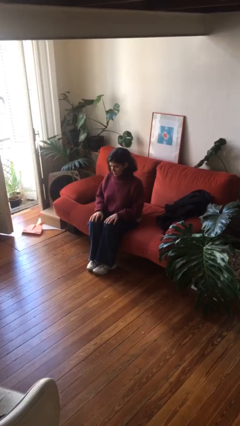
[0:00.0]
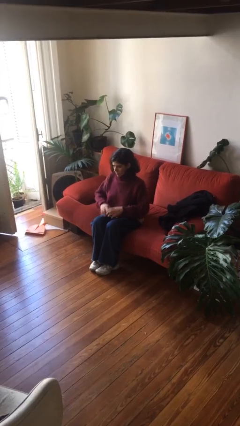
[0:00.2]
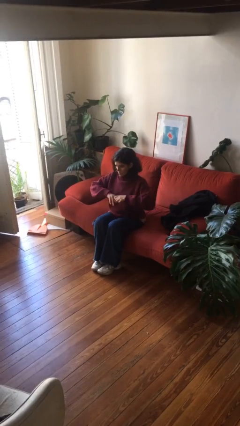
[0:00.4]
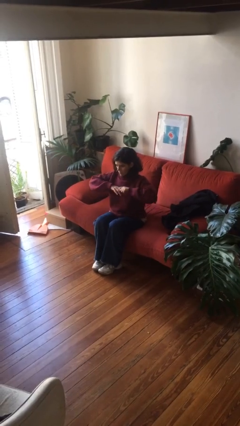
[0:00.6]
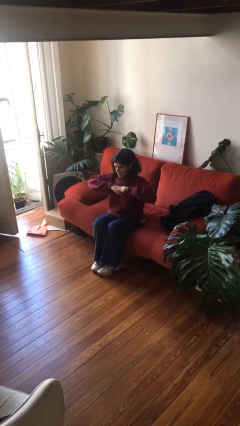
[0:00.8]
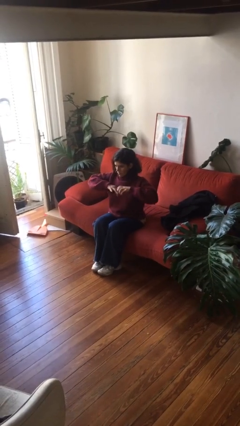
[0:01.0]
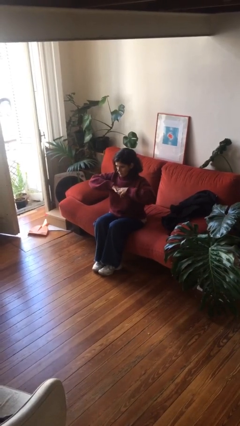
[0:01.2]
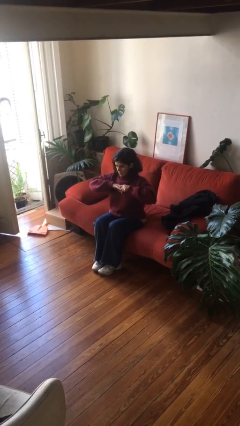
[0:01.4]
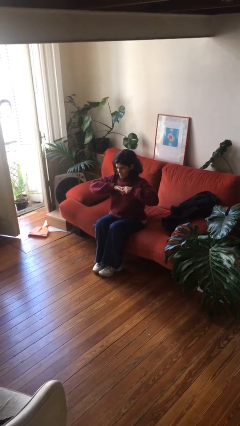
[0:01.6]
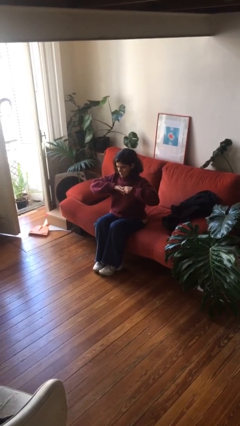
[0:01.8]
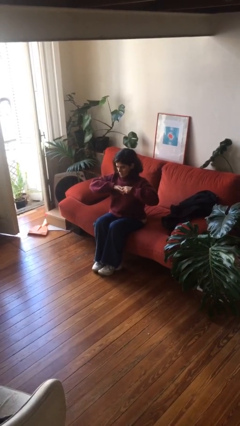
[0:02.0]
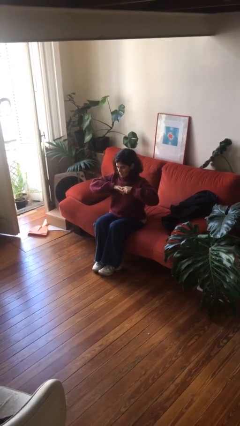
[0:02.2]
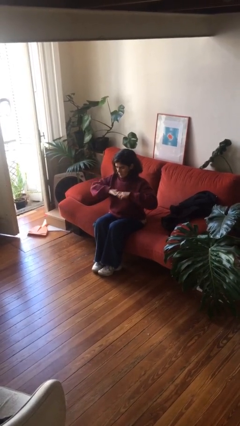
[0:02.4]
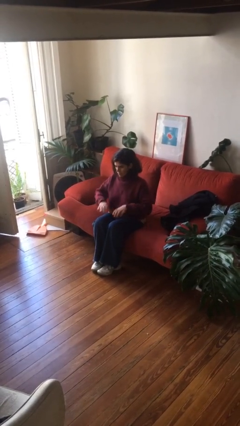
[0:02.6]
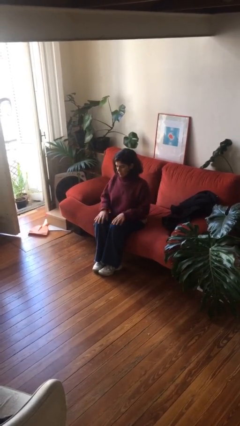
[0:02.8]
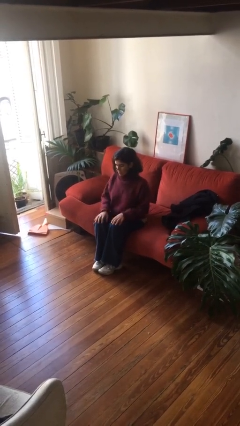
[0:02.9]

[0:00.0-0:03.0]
person cracks knuckles

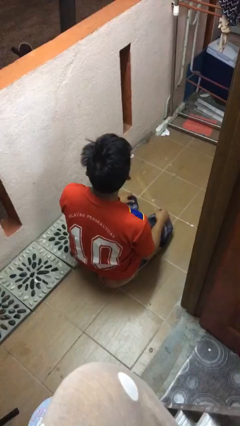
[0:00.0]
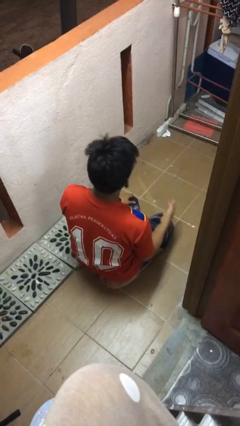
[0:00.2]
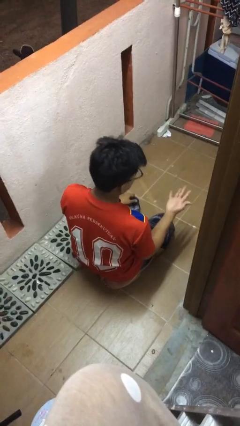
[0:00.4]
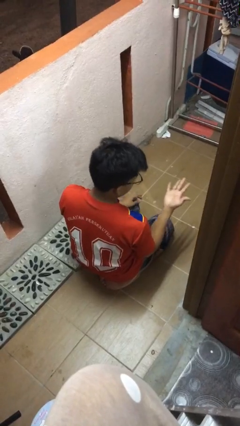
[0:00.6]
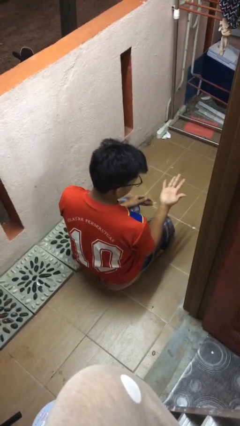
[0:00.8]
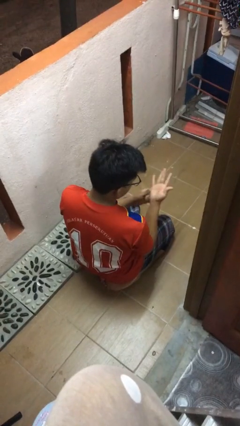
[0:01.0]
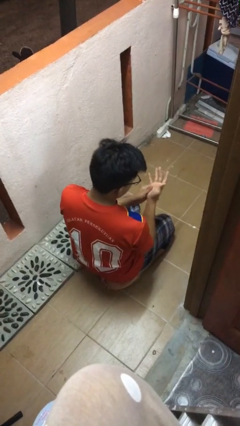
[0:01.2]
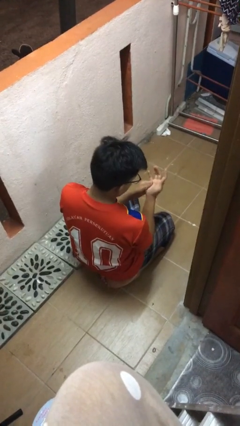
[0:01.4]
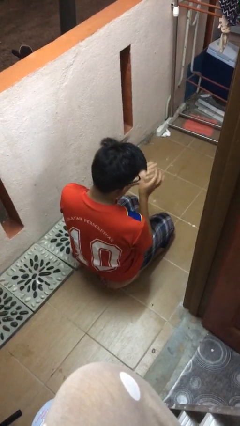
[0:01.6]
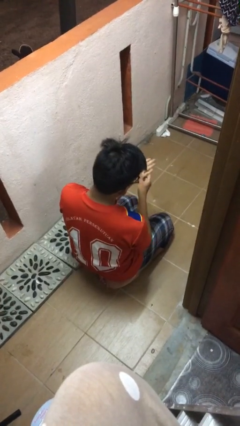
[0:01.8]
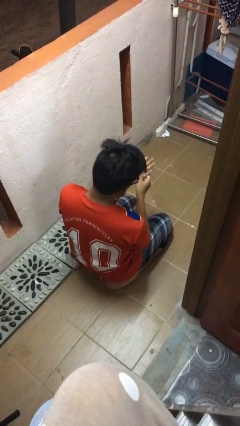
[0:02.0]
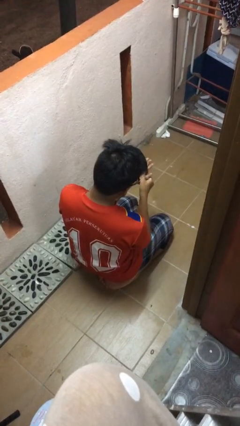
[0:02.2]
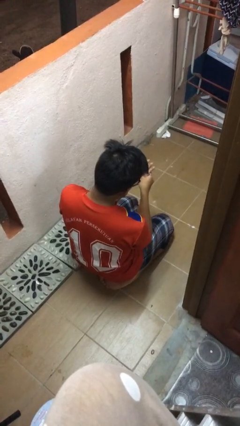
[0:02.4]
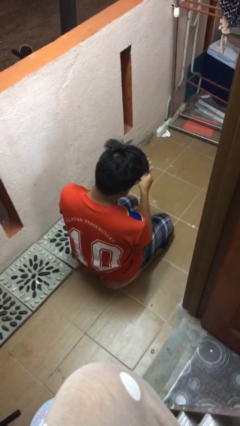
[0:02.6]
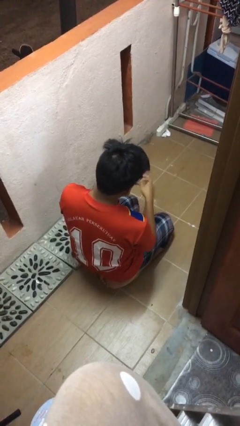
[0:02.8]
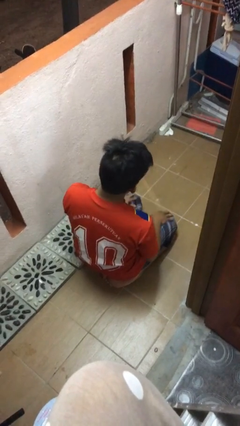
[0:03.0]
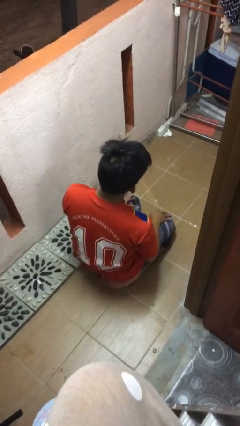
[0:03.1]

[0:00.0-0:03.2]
person looks at hands in lap

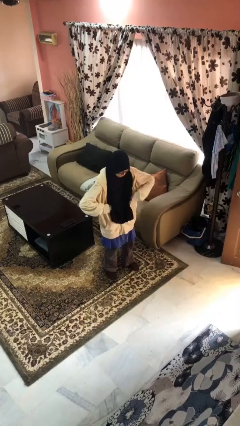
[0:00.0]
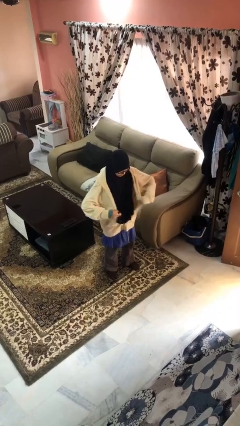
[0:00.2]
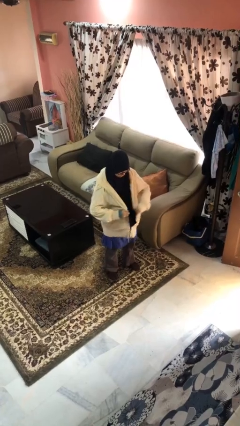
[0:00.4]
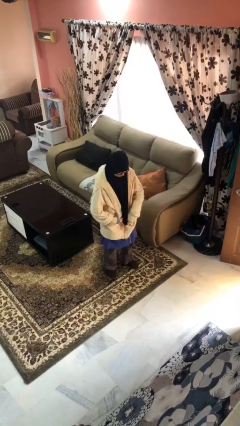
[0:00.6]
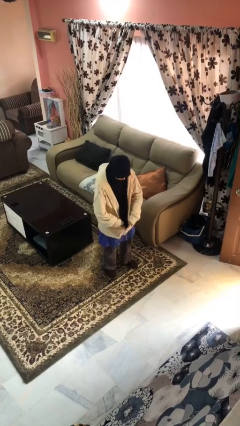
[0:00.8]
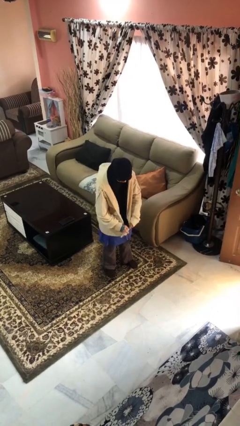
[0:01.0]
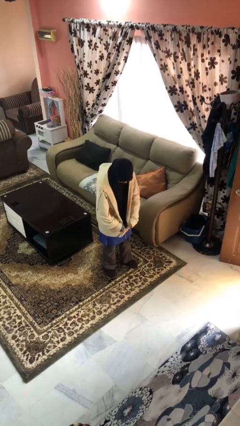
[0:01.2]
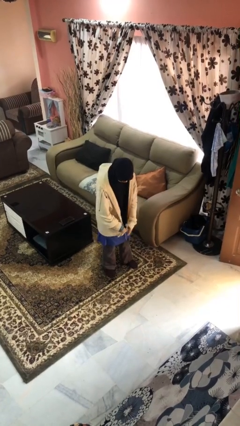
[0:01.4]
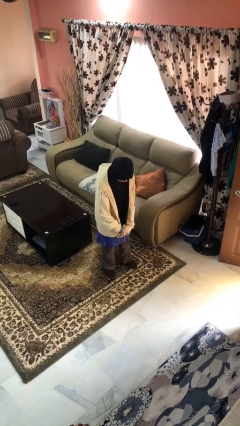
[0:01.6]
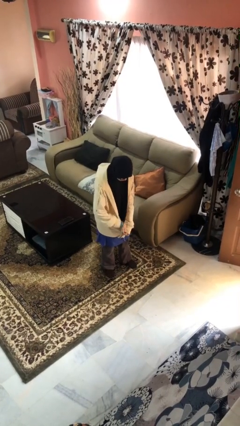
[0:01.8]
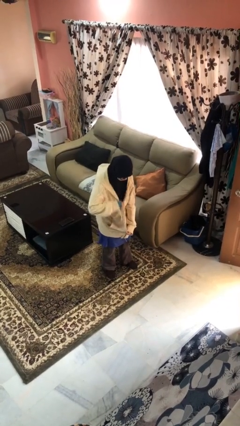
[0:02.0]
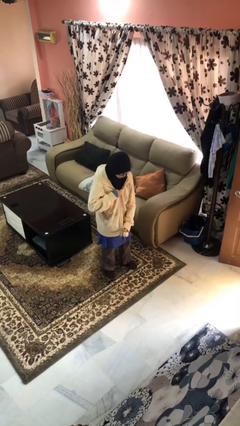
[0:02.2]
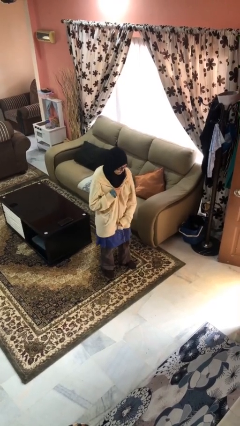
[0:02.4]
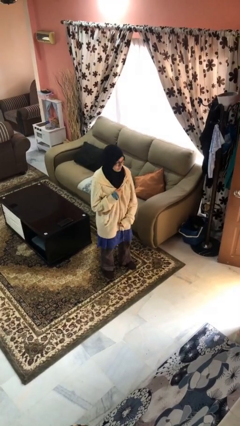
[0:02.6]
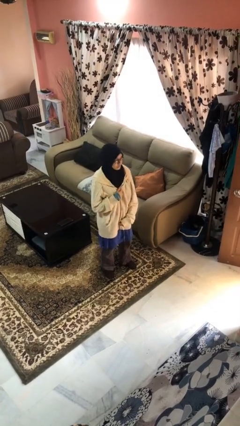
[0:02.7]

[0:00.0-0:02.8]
person zips up jacket

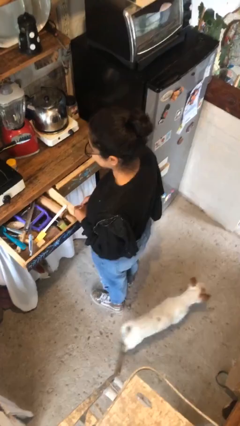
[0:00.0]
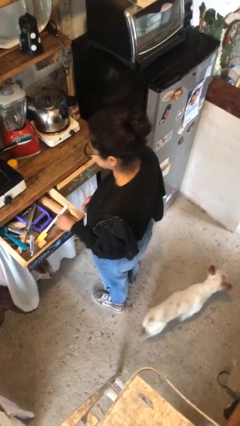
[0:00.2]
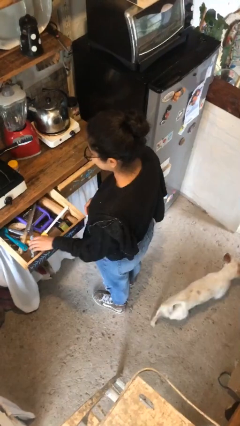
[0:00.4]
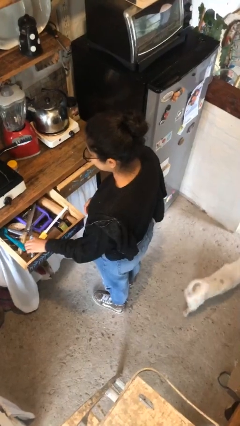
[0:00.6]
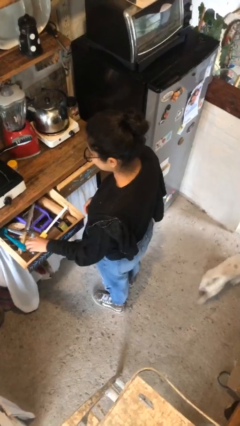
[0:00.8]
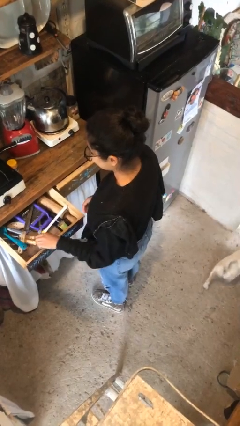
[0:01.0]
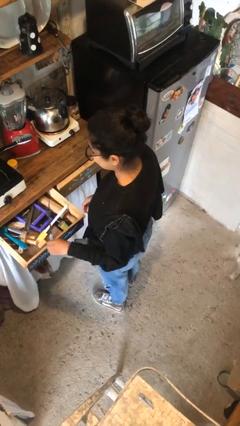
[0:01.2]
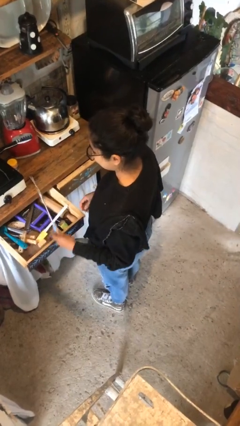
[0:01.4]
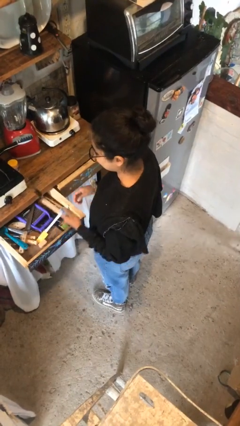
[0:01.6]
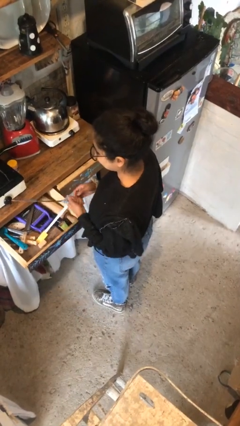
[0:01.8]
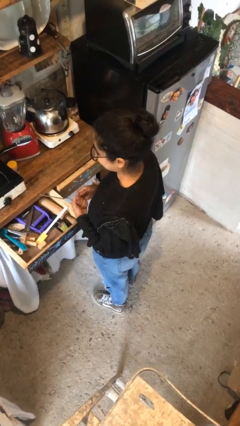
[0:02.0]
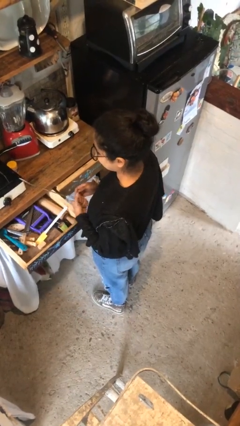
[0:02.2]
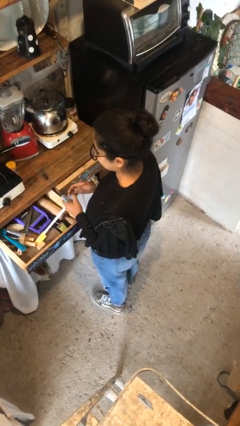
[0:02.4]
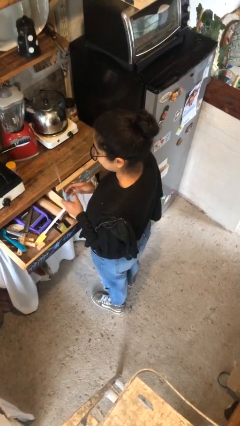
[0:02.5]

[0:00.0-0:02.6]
person takes object from kitchen drawer

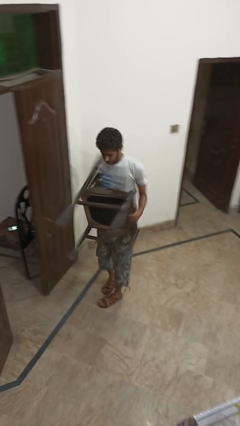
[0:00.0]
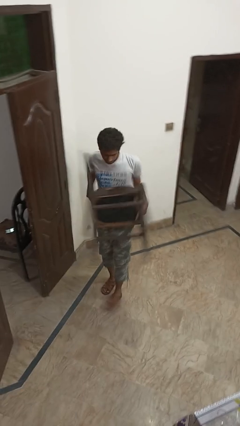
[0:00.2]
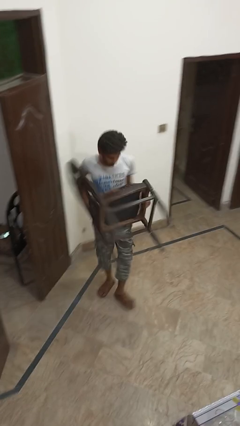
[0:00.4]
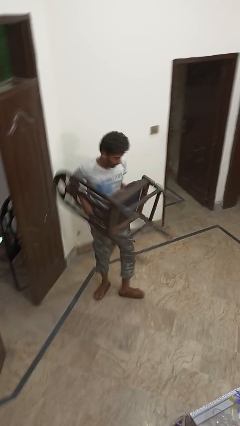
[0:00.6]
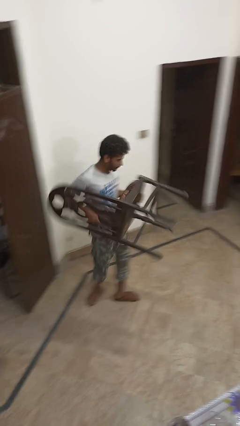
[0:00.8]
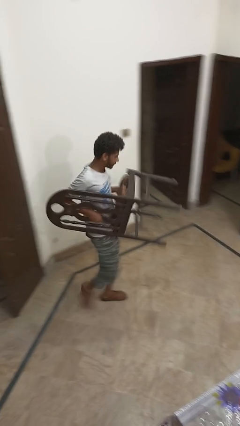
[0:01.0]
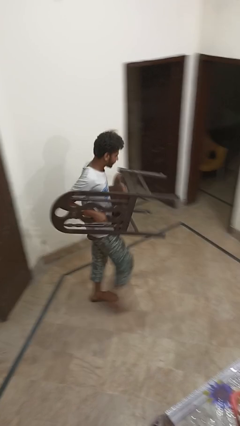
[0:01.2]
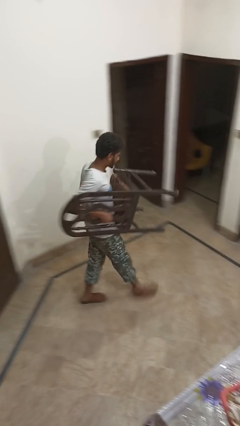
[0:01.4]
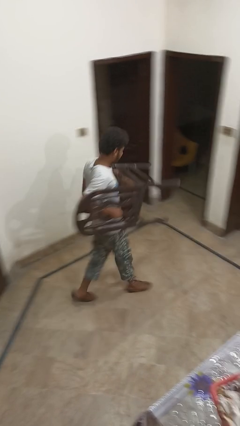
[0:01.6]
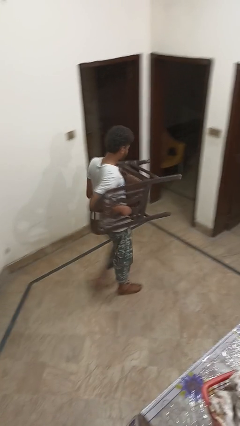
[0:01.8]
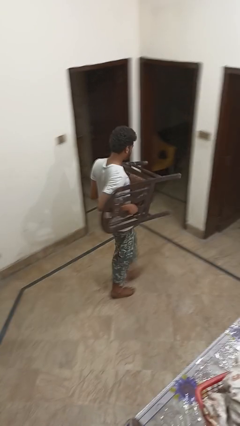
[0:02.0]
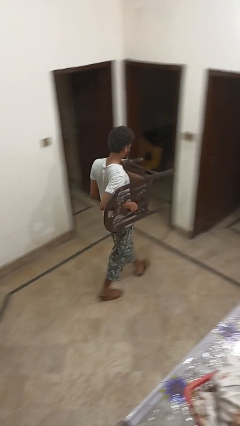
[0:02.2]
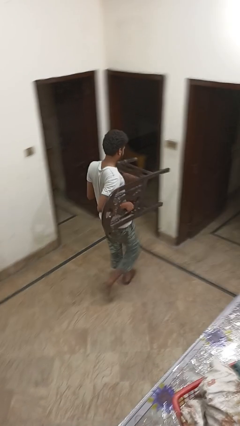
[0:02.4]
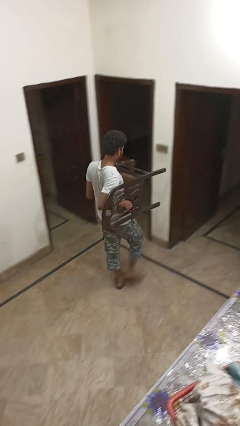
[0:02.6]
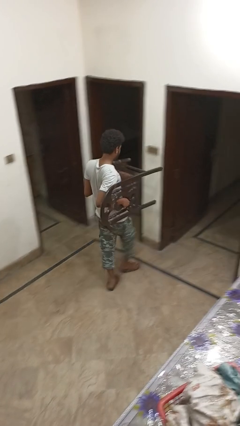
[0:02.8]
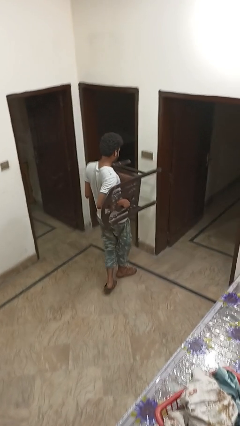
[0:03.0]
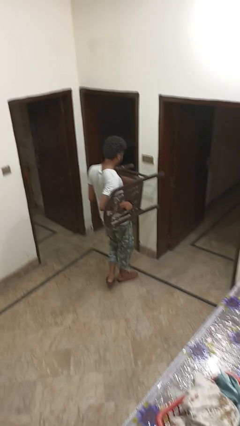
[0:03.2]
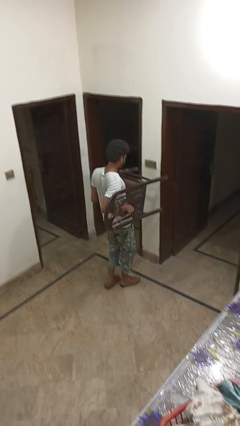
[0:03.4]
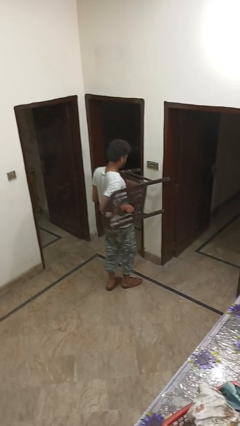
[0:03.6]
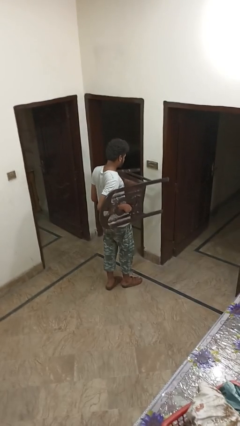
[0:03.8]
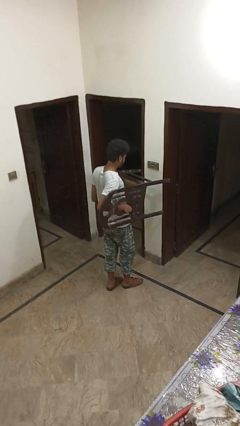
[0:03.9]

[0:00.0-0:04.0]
person carries furniture

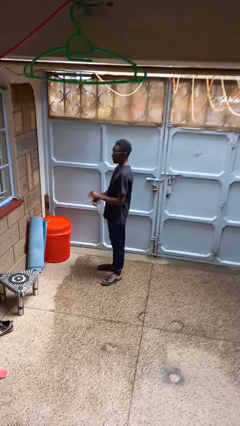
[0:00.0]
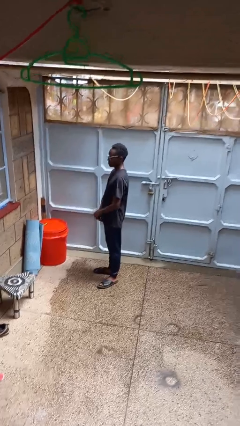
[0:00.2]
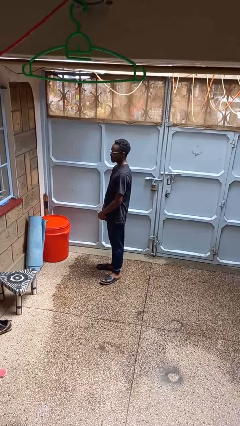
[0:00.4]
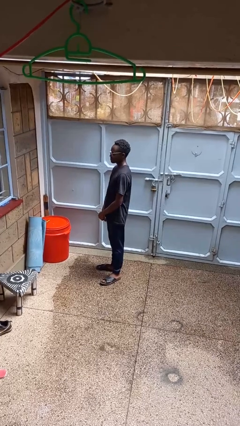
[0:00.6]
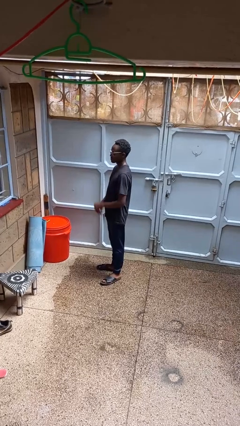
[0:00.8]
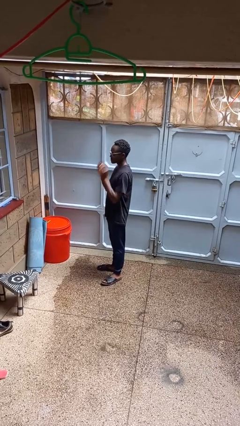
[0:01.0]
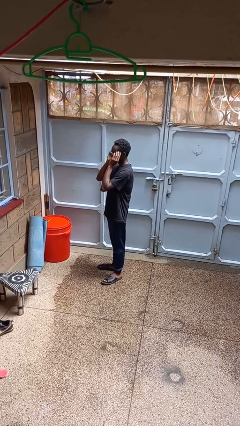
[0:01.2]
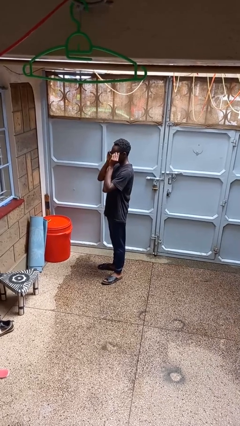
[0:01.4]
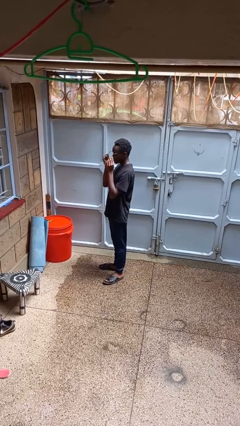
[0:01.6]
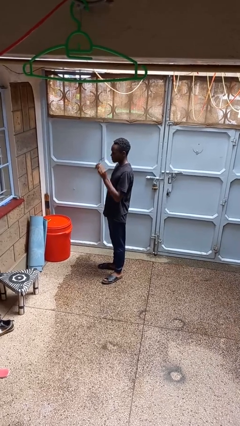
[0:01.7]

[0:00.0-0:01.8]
person takes off glasses
